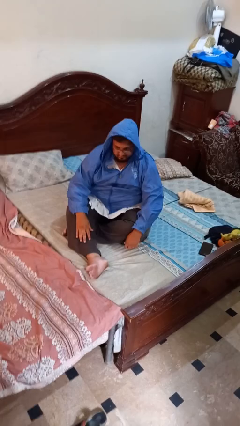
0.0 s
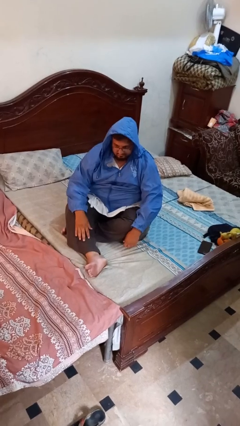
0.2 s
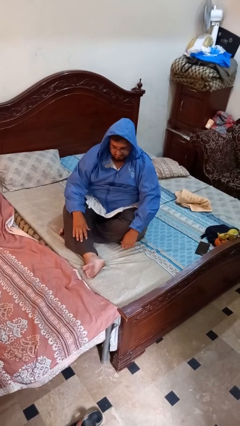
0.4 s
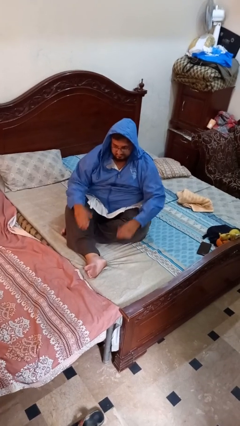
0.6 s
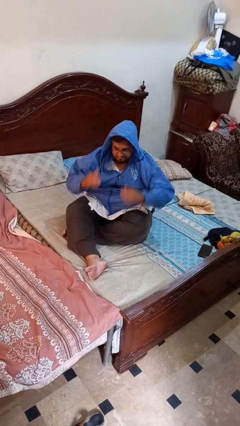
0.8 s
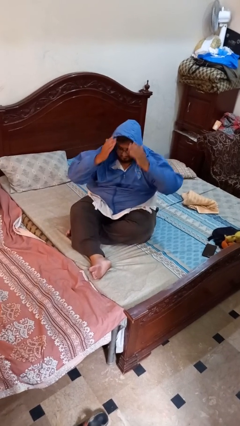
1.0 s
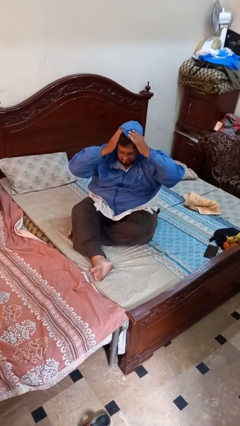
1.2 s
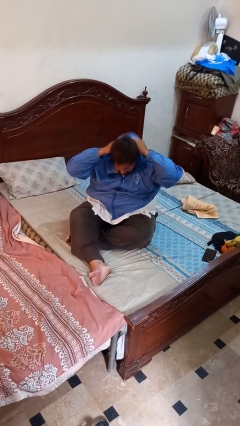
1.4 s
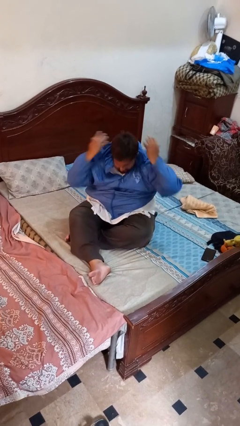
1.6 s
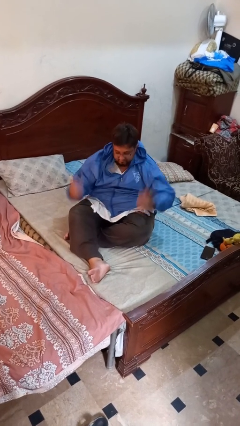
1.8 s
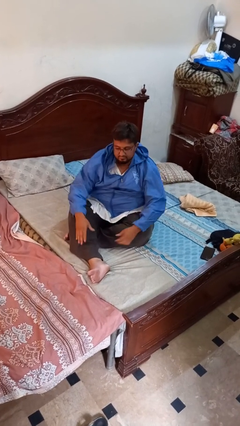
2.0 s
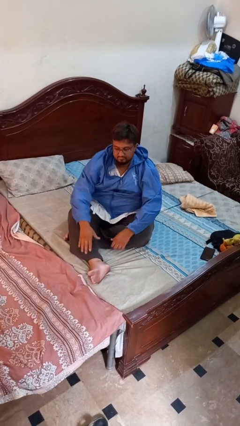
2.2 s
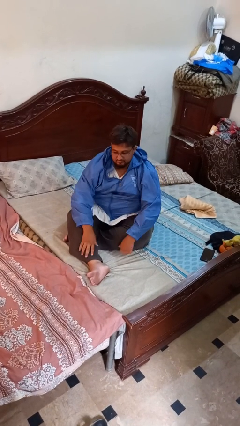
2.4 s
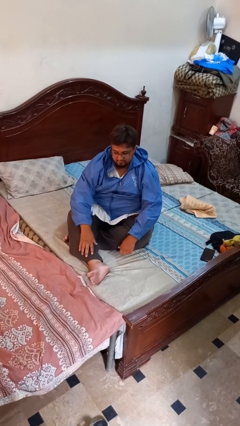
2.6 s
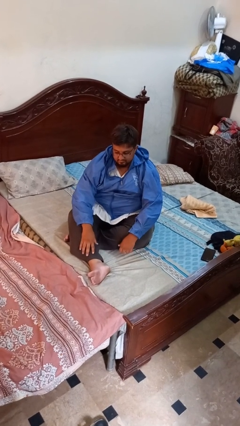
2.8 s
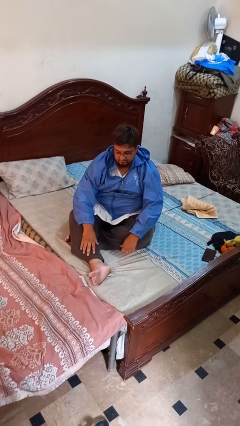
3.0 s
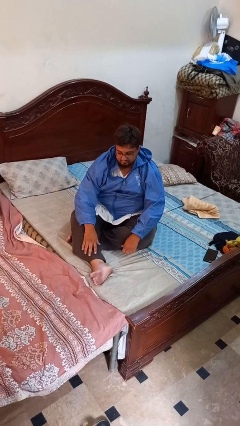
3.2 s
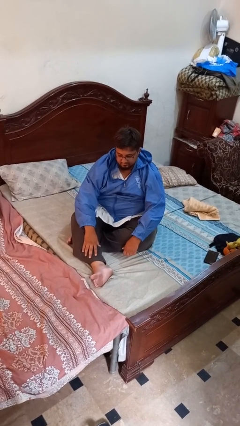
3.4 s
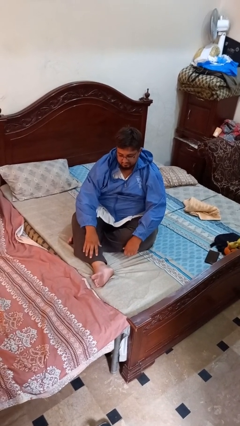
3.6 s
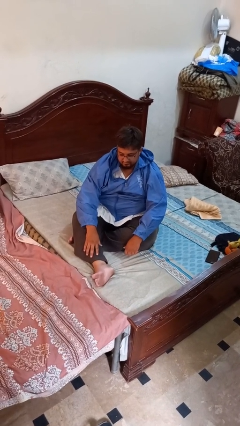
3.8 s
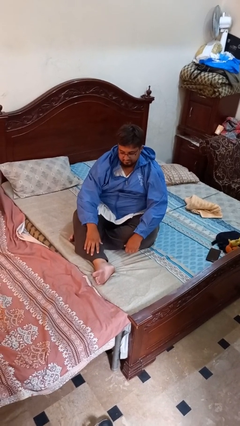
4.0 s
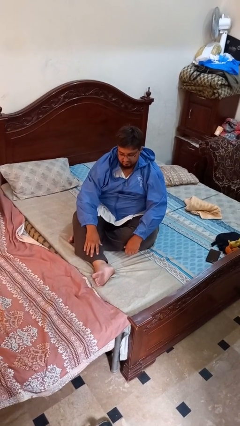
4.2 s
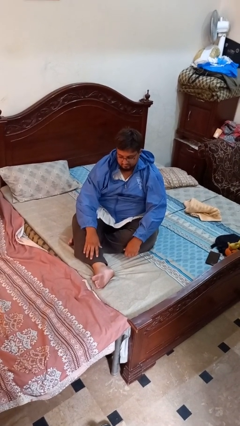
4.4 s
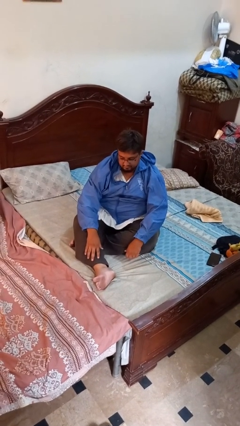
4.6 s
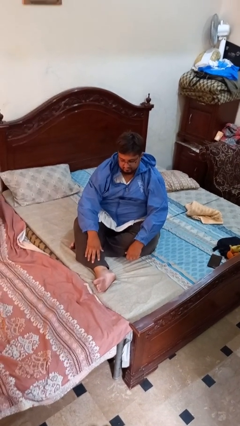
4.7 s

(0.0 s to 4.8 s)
person takes off hoodie

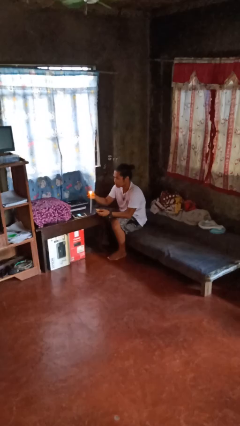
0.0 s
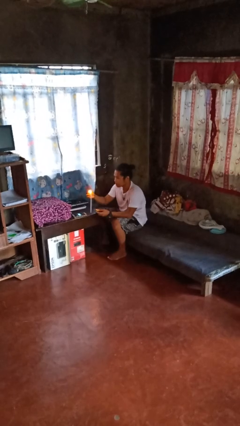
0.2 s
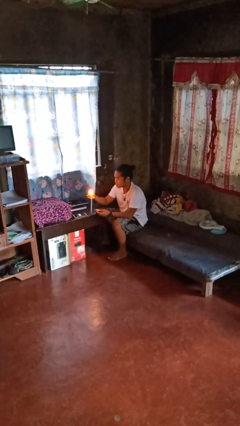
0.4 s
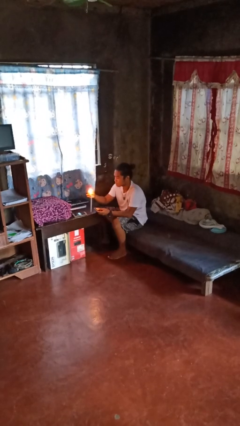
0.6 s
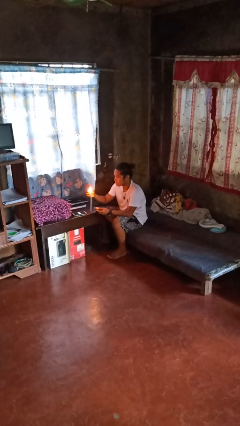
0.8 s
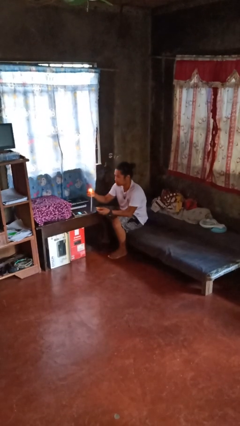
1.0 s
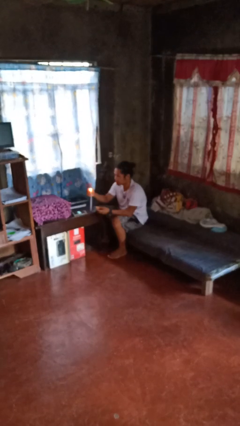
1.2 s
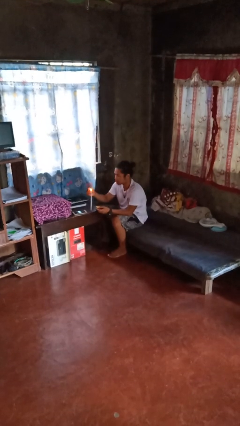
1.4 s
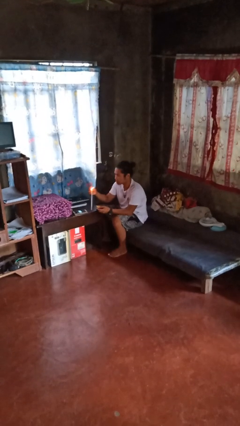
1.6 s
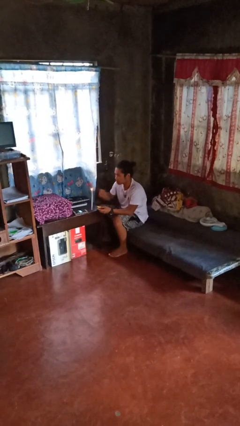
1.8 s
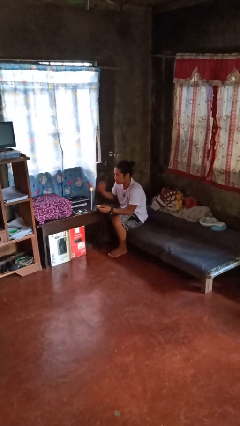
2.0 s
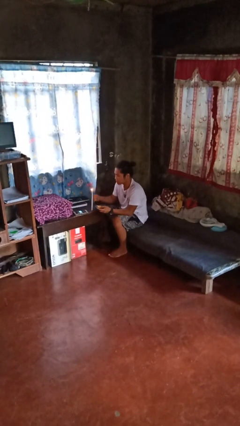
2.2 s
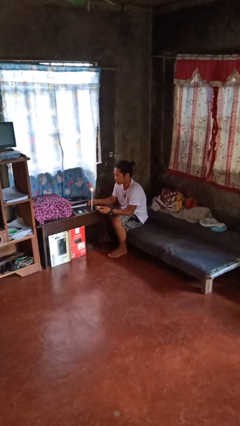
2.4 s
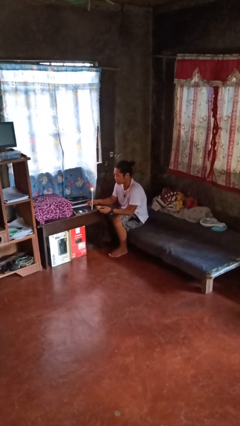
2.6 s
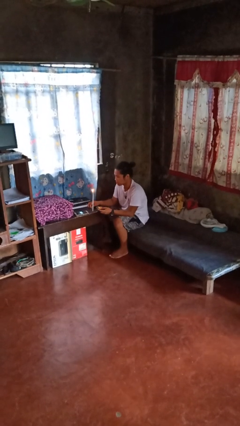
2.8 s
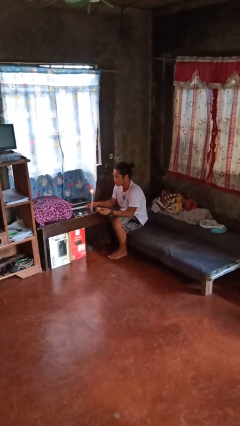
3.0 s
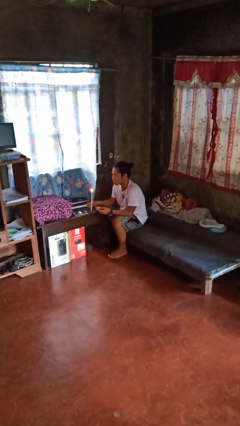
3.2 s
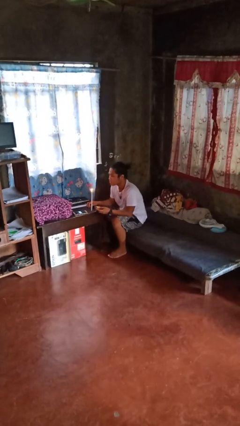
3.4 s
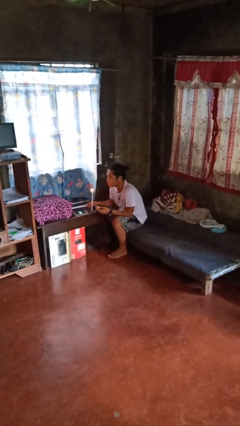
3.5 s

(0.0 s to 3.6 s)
person lights candle

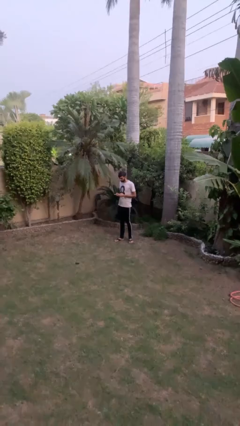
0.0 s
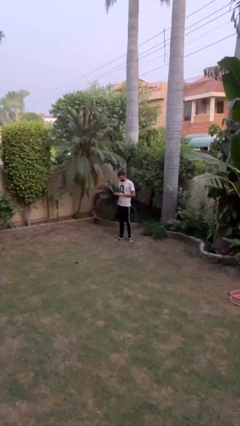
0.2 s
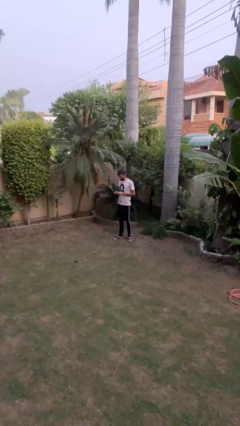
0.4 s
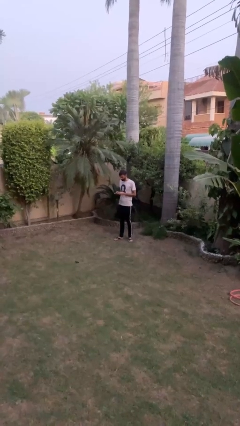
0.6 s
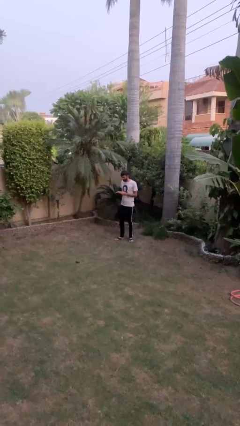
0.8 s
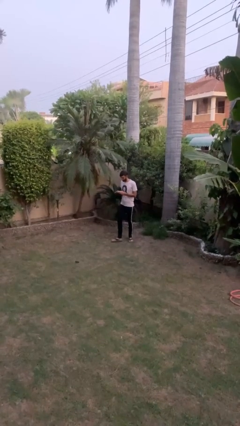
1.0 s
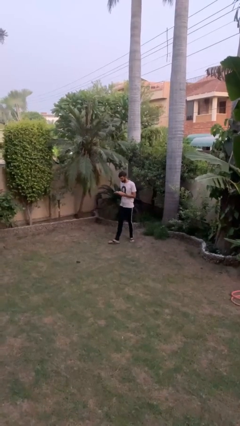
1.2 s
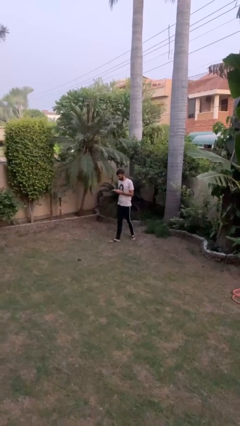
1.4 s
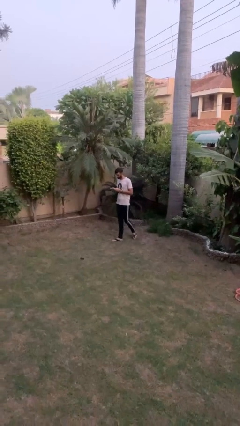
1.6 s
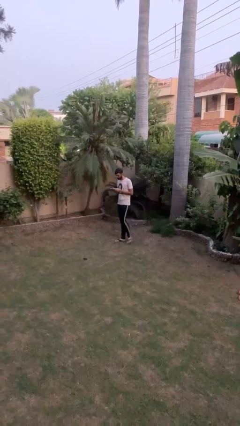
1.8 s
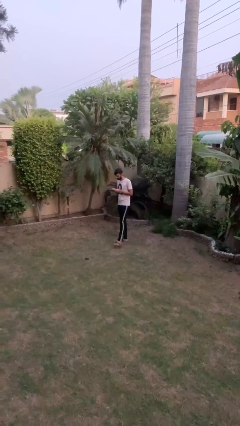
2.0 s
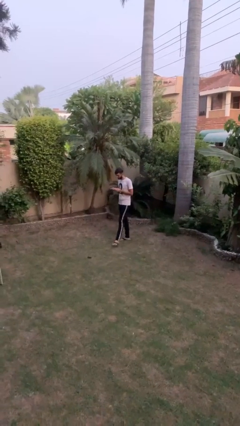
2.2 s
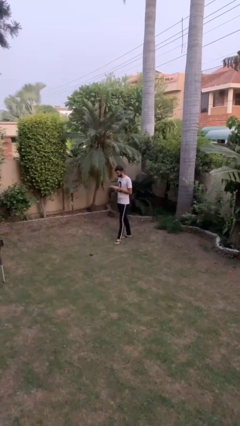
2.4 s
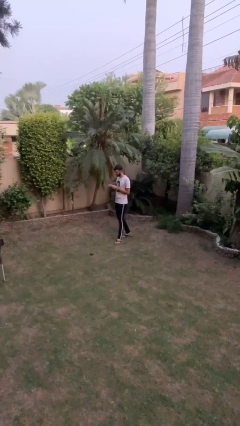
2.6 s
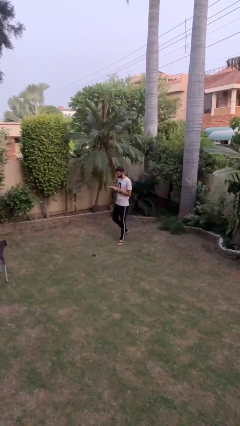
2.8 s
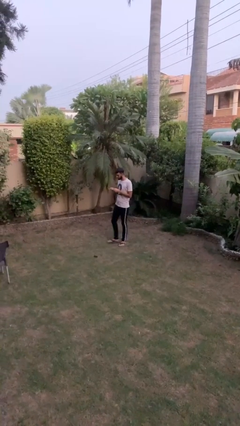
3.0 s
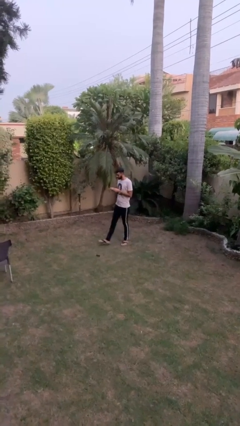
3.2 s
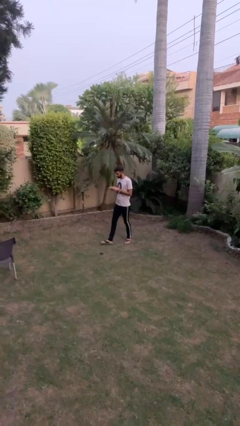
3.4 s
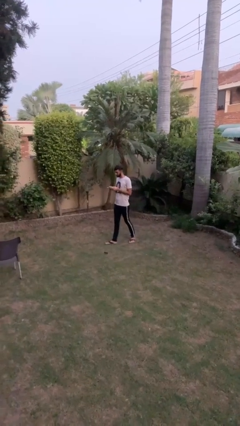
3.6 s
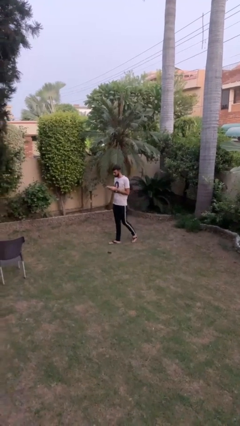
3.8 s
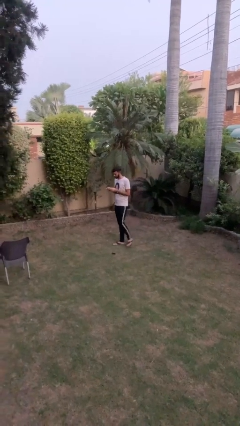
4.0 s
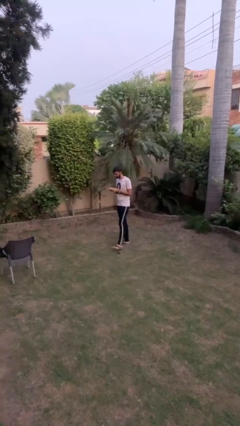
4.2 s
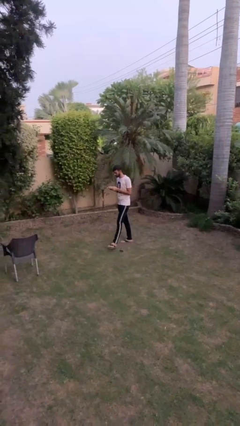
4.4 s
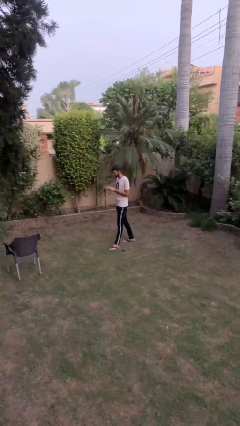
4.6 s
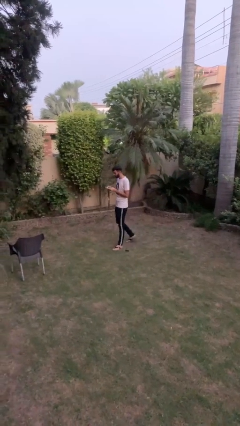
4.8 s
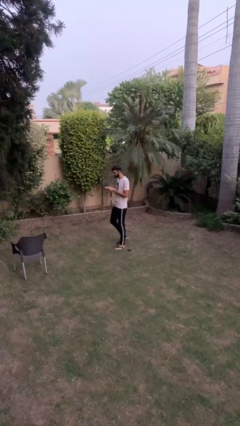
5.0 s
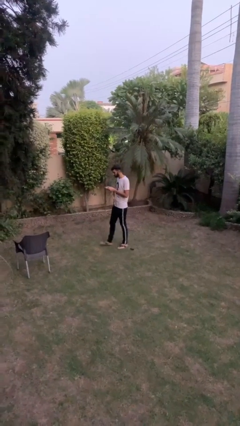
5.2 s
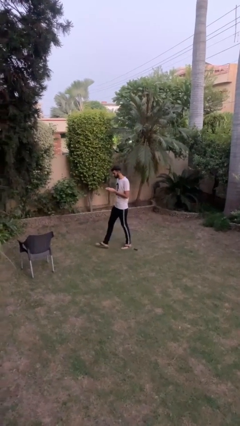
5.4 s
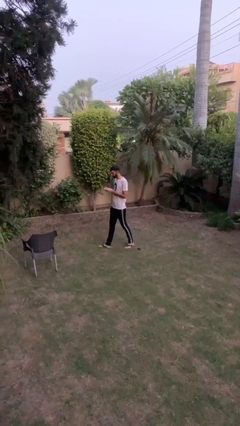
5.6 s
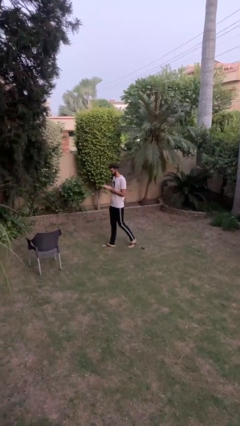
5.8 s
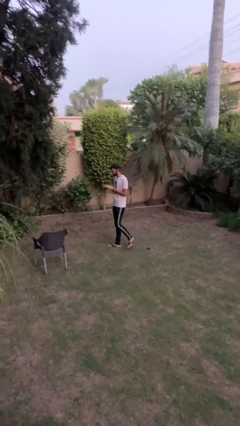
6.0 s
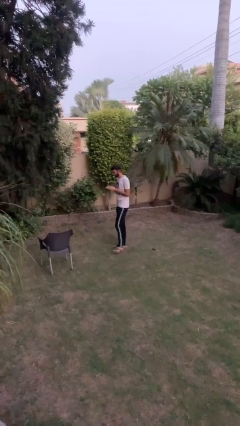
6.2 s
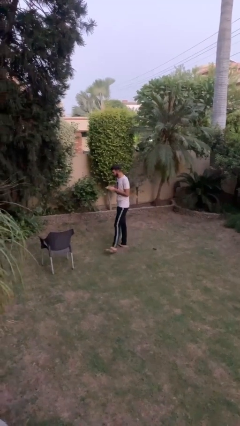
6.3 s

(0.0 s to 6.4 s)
person texts on phone

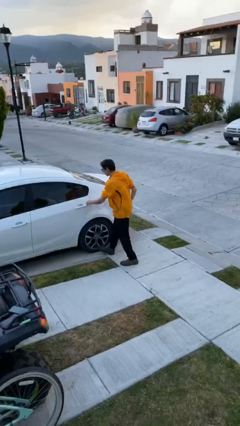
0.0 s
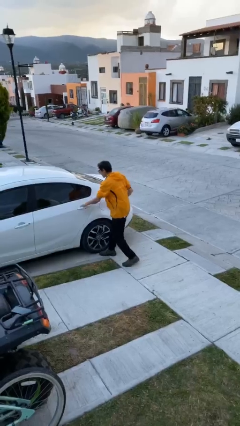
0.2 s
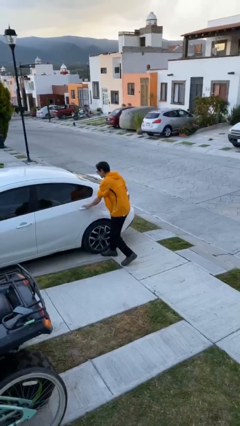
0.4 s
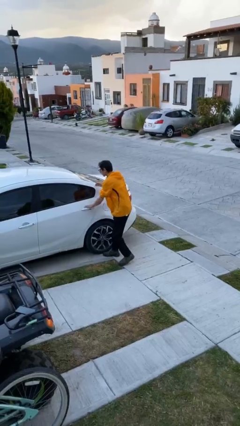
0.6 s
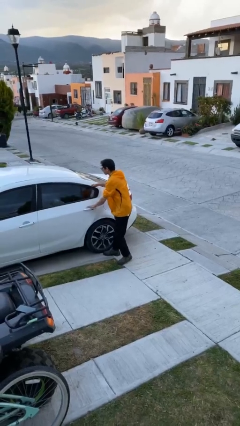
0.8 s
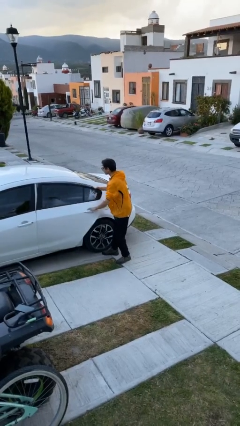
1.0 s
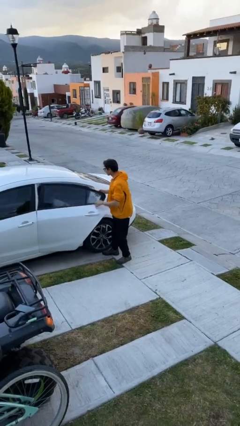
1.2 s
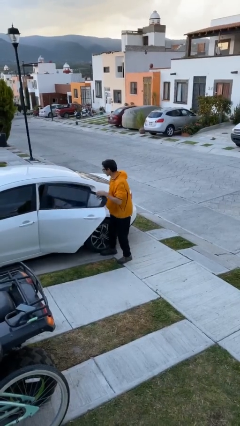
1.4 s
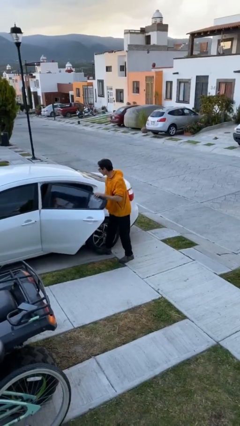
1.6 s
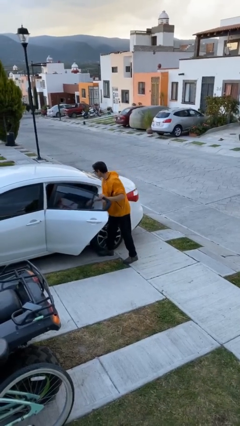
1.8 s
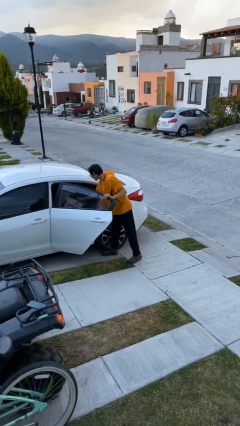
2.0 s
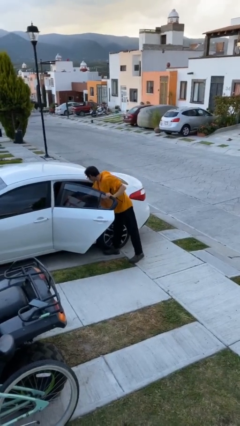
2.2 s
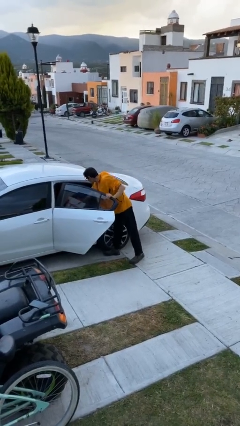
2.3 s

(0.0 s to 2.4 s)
person opens car door

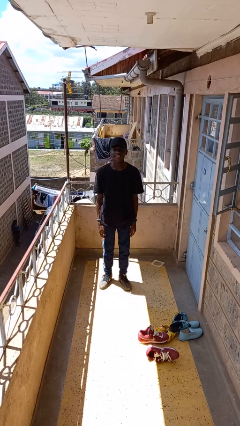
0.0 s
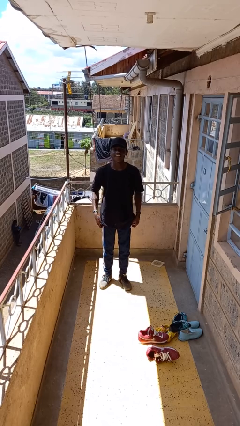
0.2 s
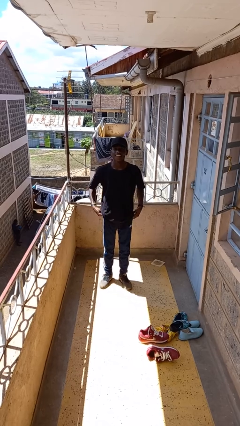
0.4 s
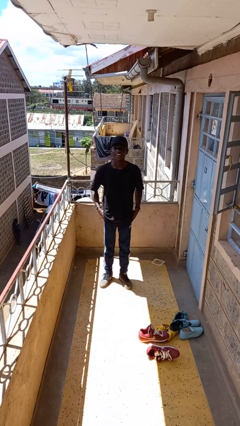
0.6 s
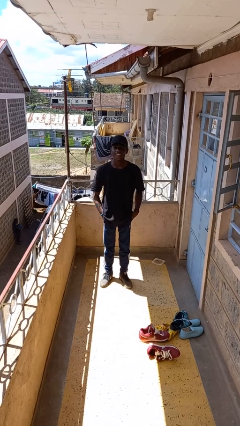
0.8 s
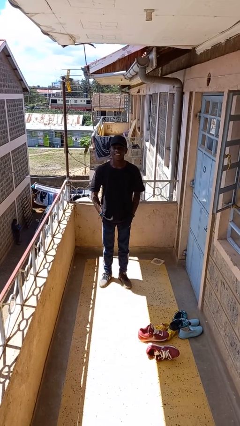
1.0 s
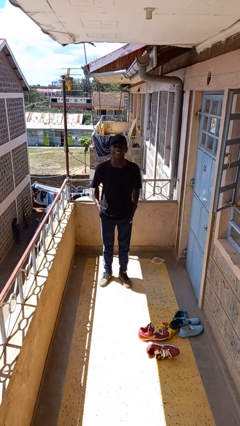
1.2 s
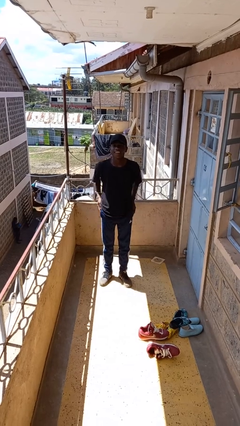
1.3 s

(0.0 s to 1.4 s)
person puts hands in back pockets
